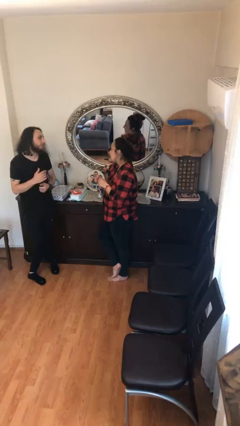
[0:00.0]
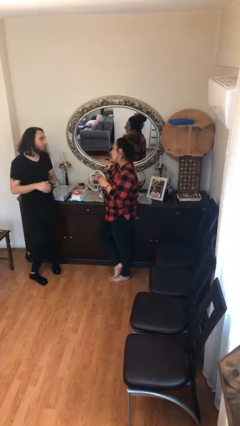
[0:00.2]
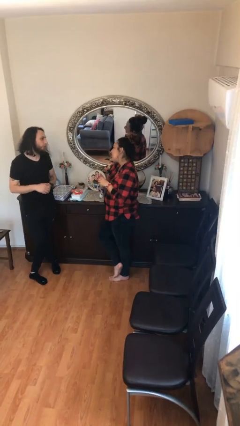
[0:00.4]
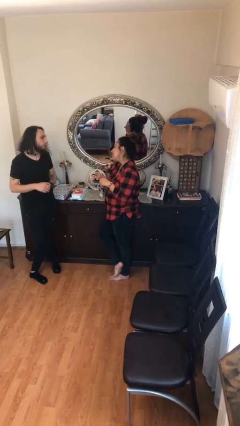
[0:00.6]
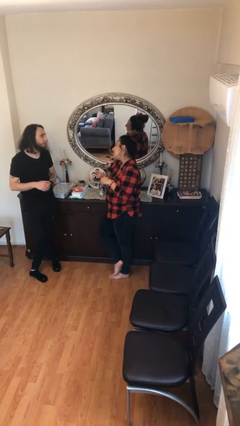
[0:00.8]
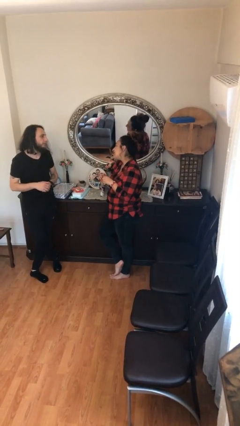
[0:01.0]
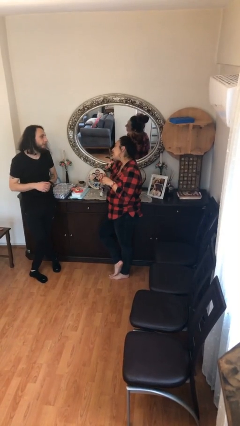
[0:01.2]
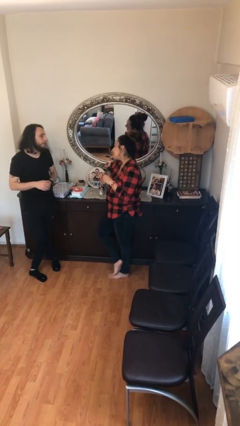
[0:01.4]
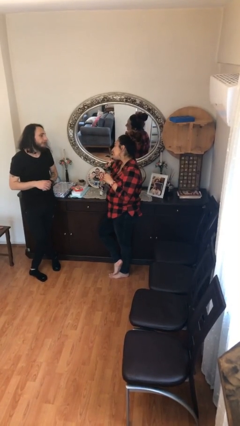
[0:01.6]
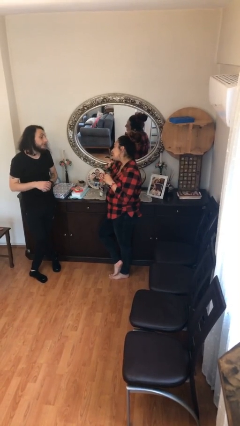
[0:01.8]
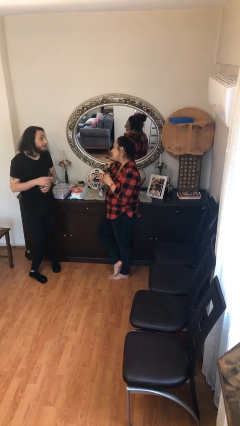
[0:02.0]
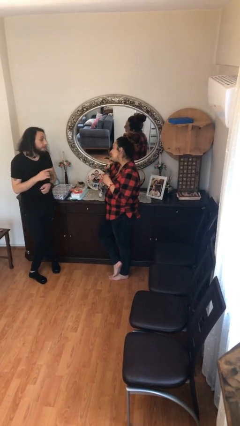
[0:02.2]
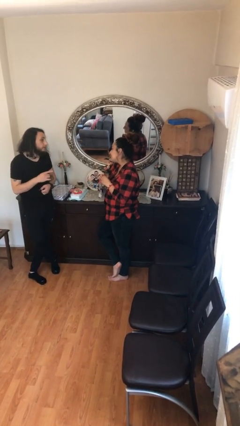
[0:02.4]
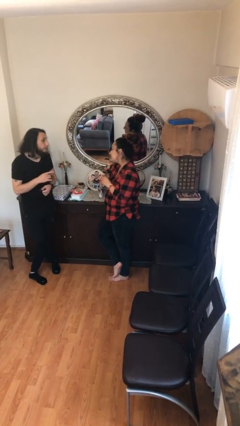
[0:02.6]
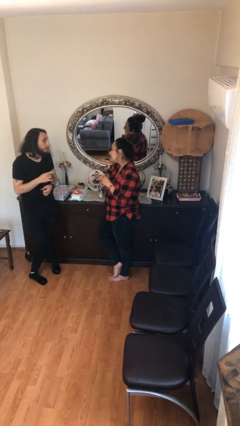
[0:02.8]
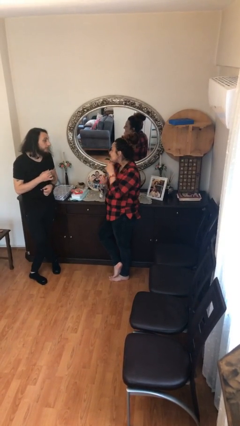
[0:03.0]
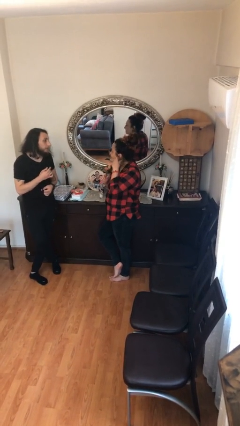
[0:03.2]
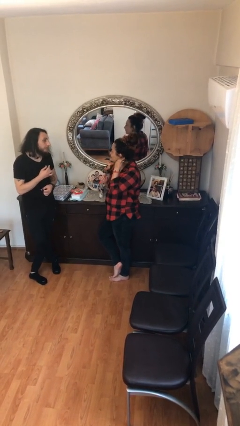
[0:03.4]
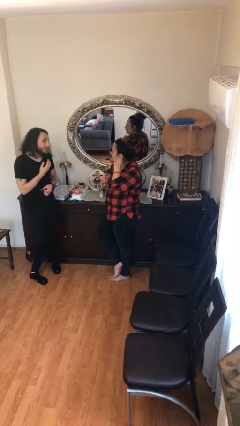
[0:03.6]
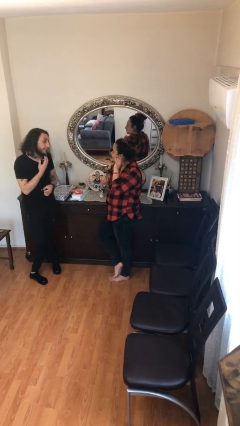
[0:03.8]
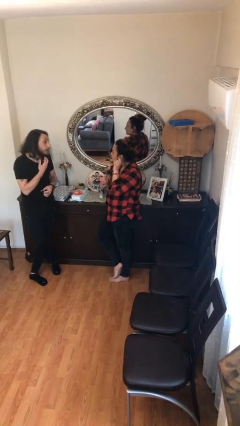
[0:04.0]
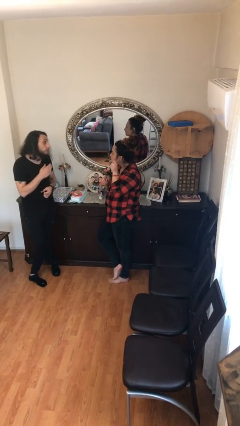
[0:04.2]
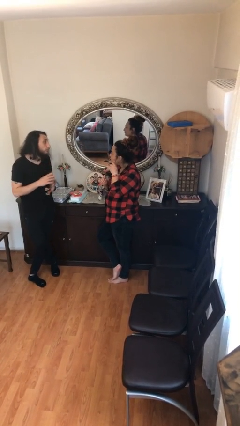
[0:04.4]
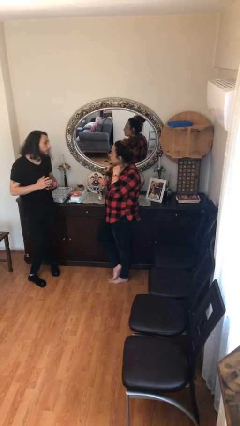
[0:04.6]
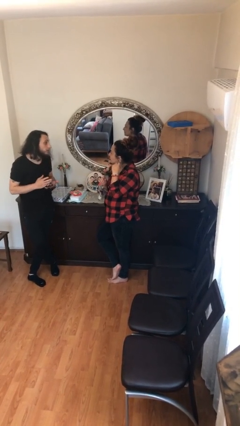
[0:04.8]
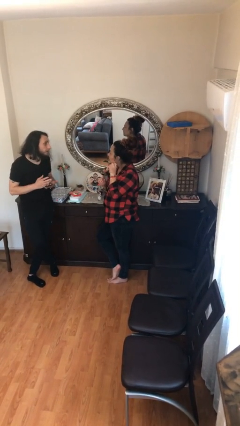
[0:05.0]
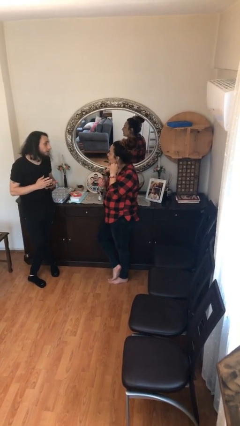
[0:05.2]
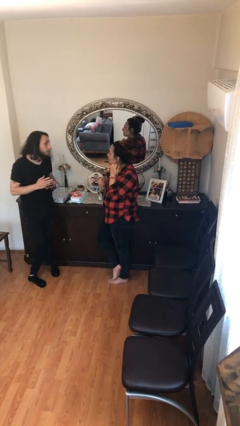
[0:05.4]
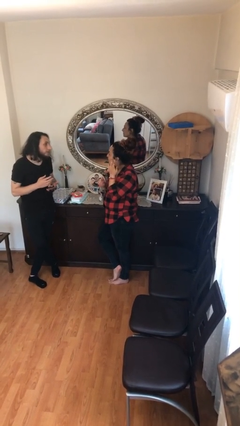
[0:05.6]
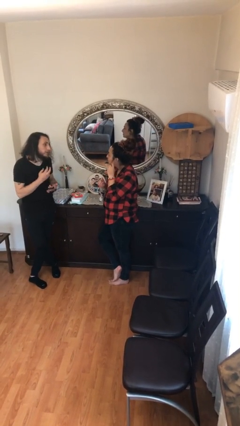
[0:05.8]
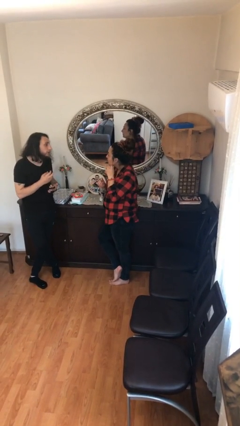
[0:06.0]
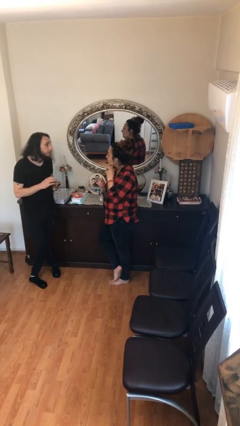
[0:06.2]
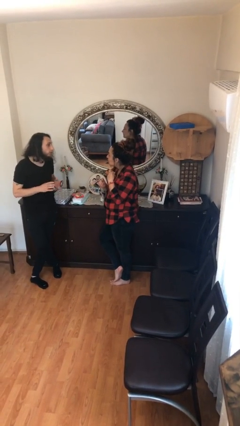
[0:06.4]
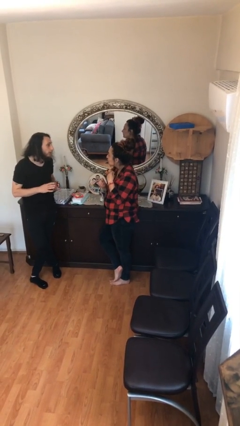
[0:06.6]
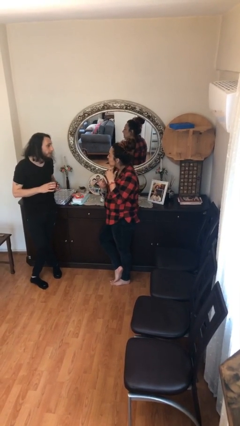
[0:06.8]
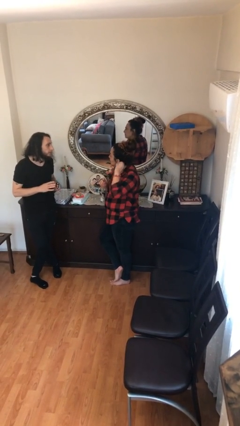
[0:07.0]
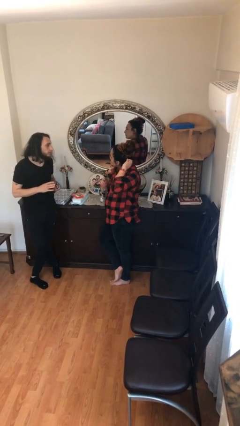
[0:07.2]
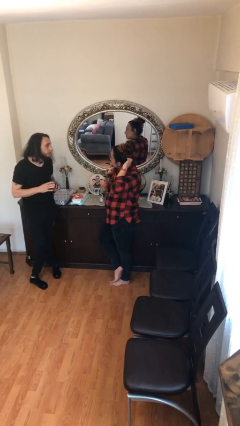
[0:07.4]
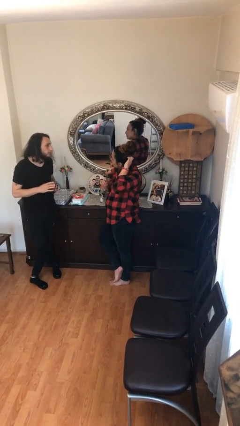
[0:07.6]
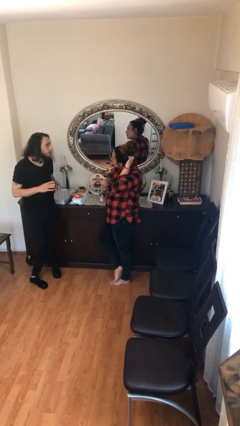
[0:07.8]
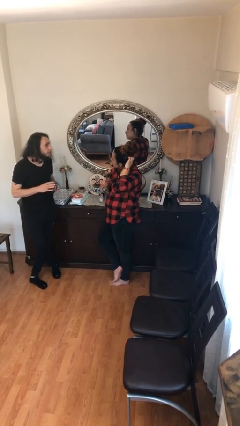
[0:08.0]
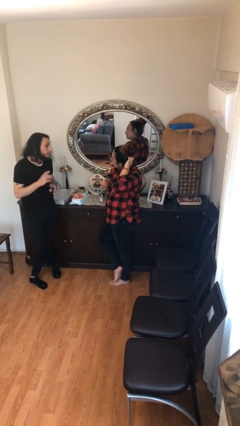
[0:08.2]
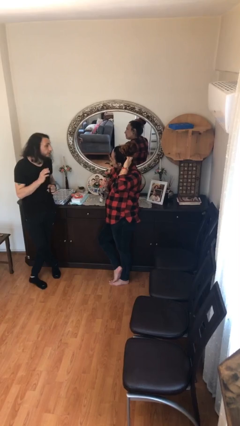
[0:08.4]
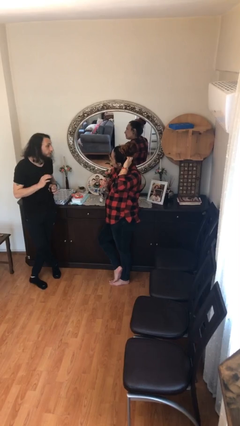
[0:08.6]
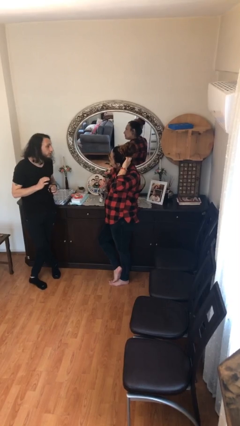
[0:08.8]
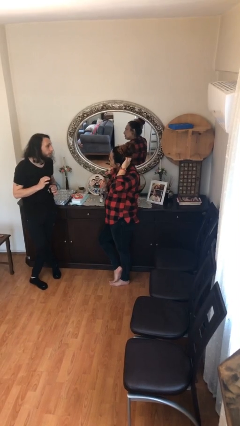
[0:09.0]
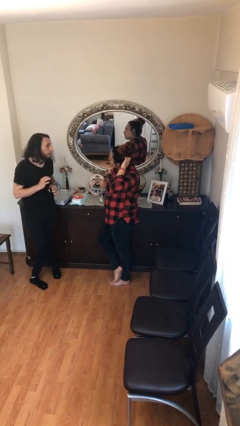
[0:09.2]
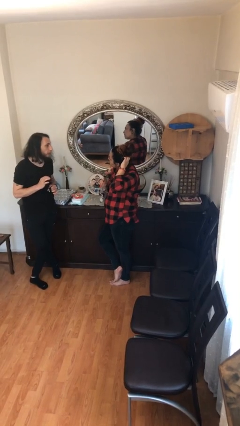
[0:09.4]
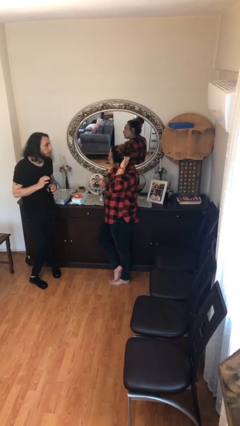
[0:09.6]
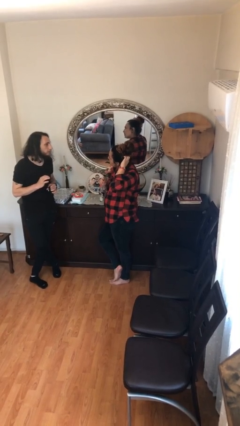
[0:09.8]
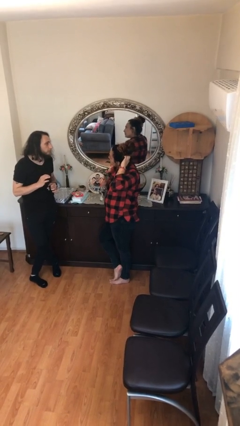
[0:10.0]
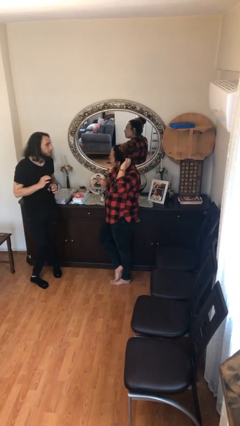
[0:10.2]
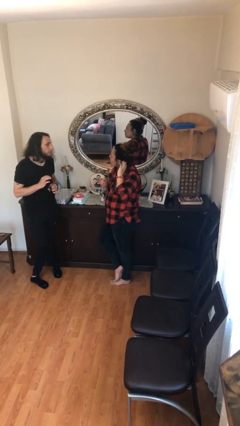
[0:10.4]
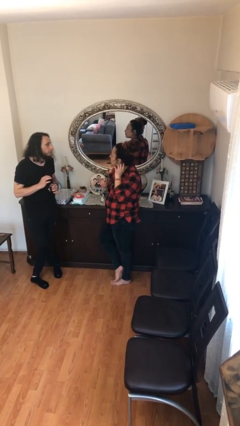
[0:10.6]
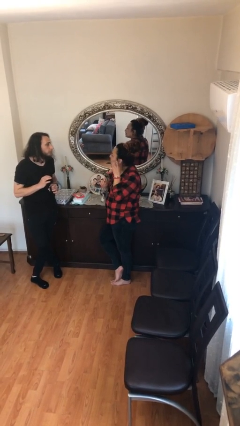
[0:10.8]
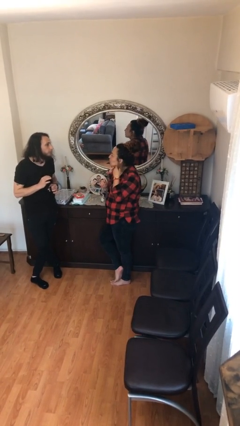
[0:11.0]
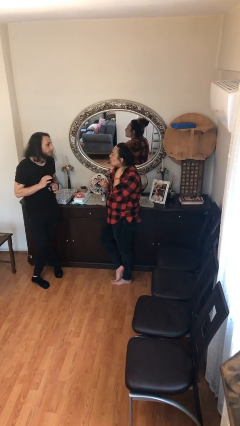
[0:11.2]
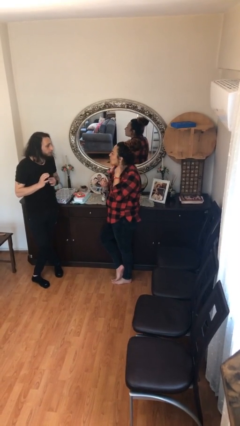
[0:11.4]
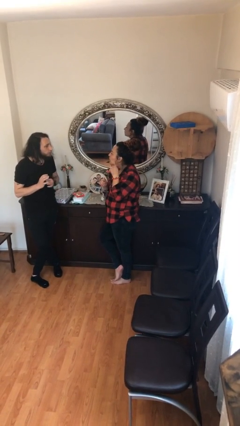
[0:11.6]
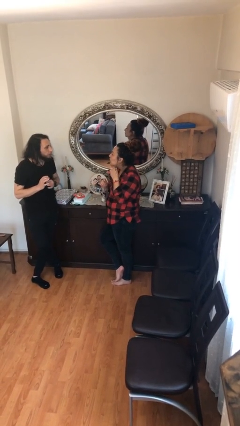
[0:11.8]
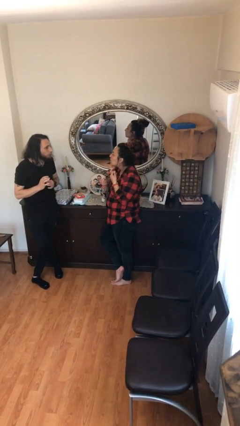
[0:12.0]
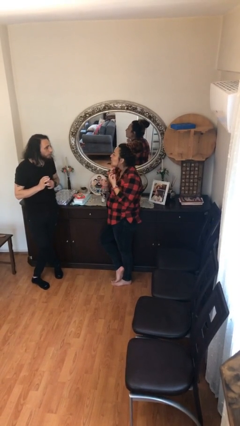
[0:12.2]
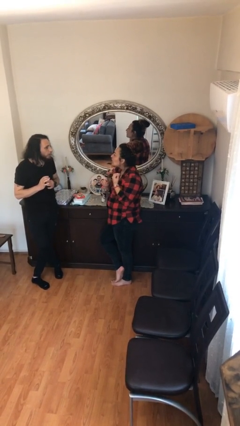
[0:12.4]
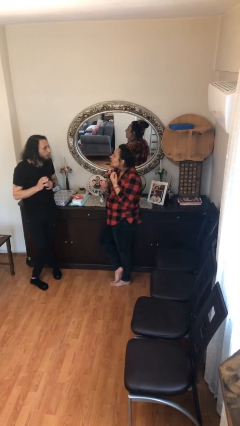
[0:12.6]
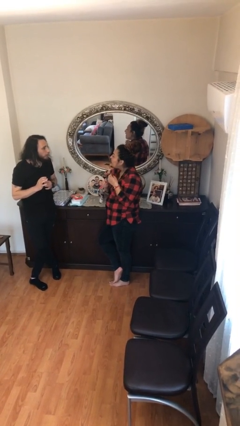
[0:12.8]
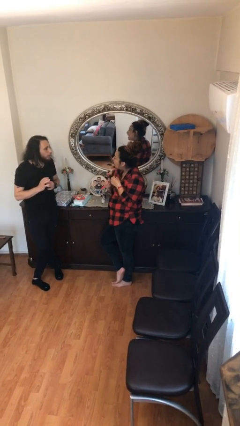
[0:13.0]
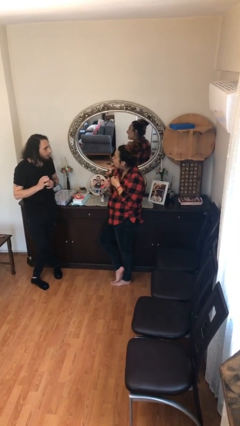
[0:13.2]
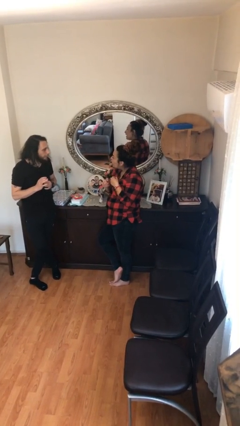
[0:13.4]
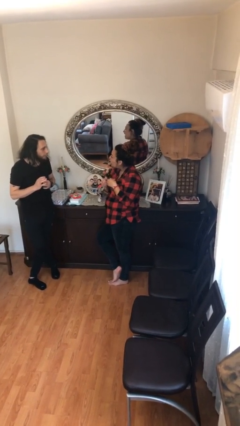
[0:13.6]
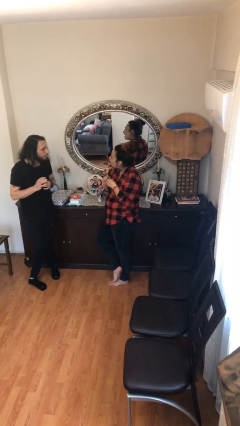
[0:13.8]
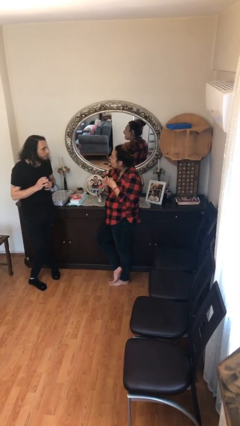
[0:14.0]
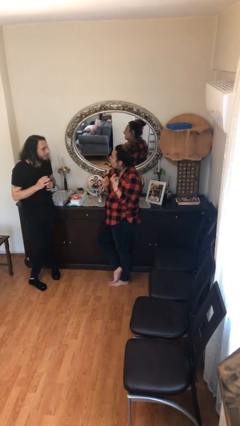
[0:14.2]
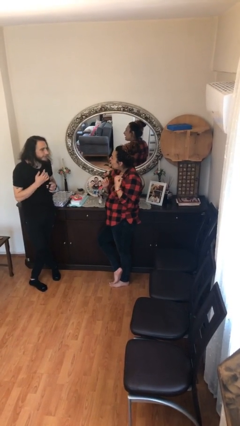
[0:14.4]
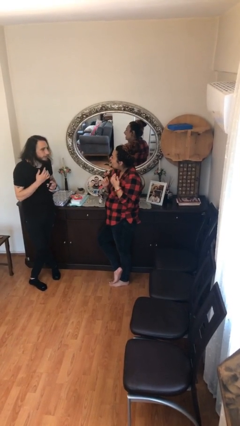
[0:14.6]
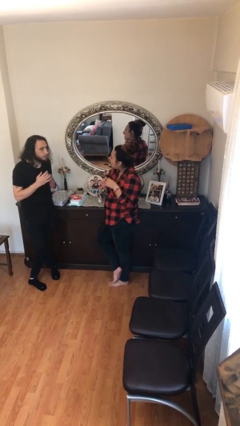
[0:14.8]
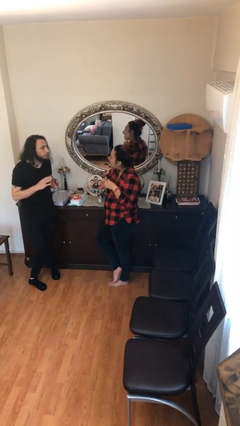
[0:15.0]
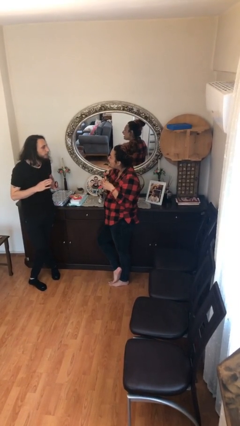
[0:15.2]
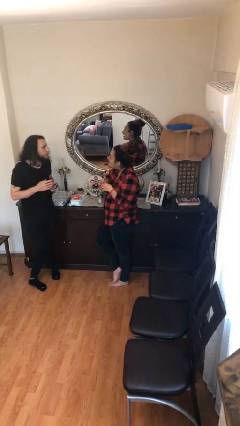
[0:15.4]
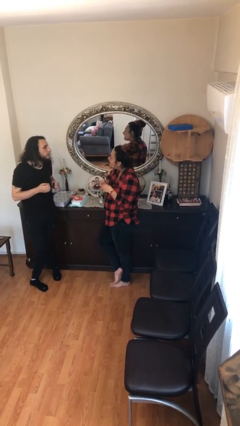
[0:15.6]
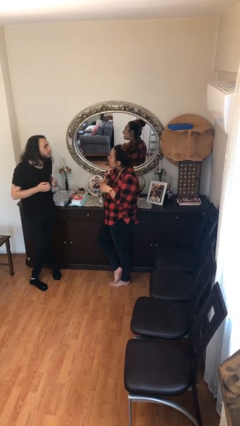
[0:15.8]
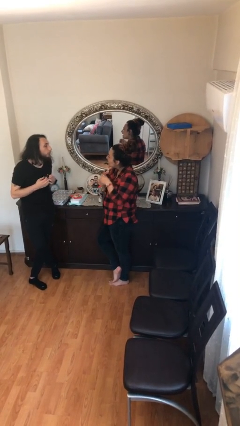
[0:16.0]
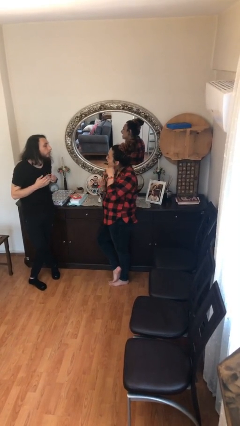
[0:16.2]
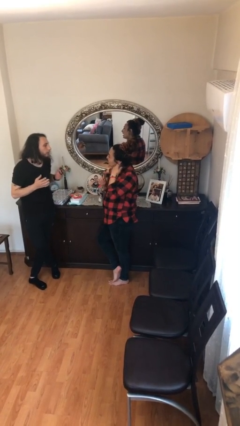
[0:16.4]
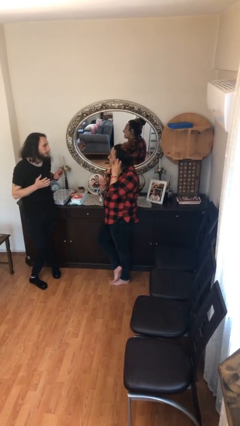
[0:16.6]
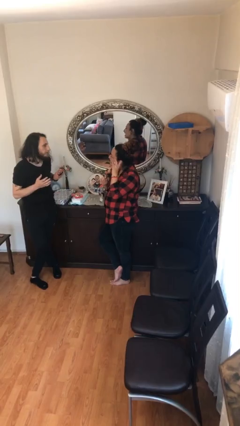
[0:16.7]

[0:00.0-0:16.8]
person talks to person

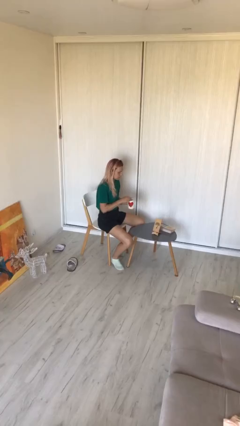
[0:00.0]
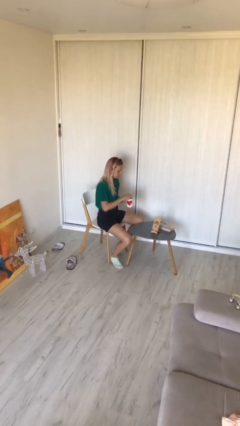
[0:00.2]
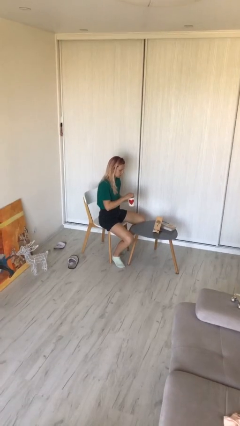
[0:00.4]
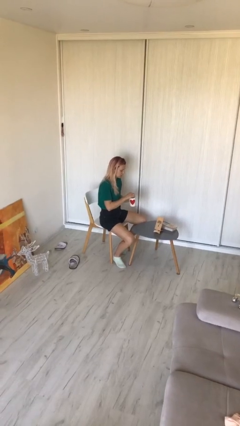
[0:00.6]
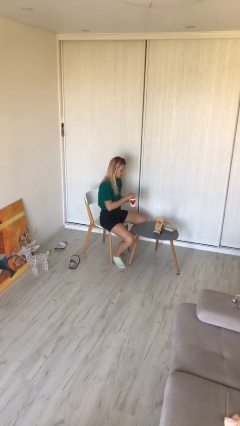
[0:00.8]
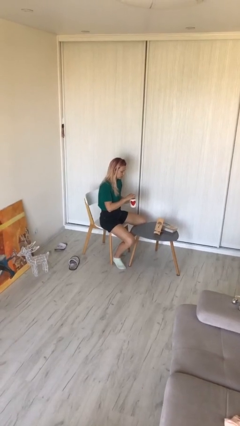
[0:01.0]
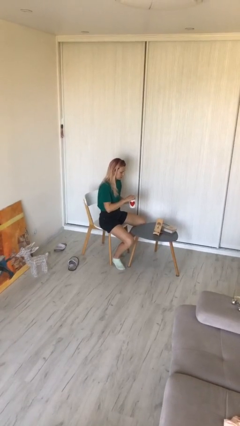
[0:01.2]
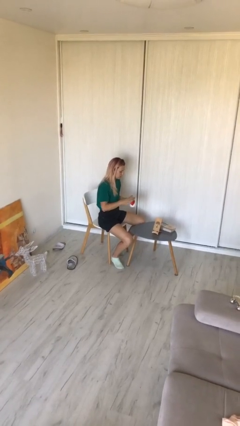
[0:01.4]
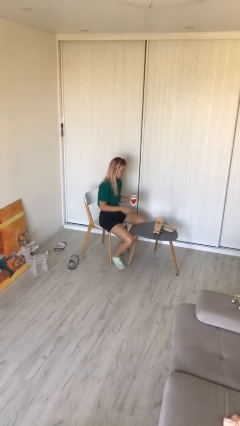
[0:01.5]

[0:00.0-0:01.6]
person stirs mug

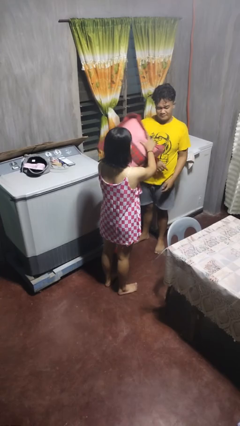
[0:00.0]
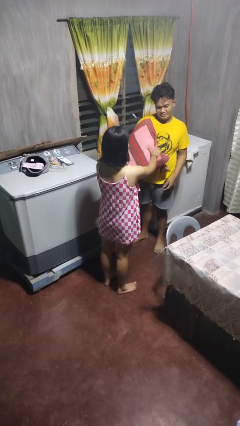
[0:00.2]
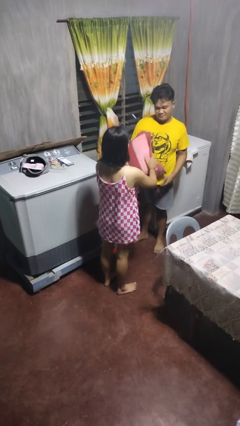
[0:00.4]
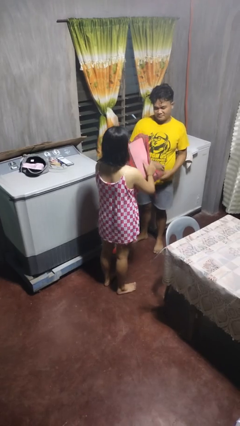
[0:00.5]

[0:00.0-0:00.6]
person hits person with pillow
